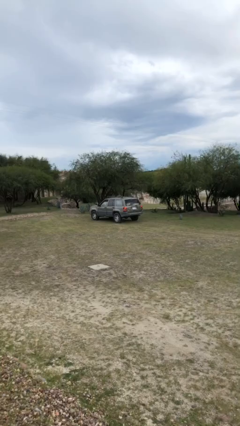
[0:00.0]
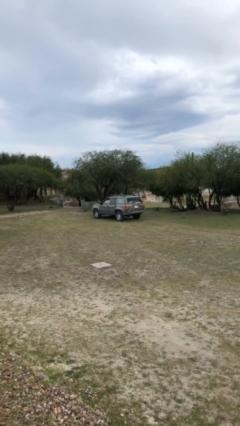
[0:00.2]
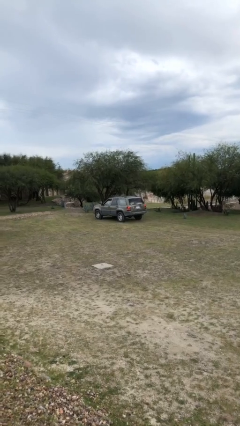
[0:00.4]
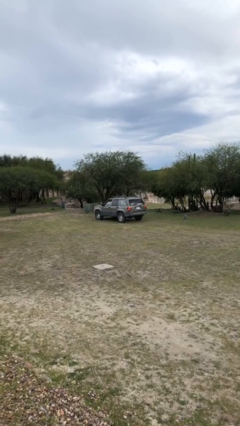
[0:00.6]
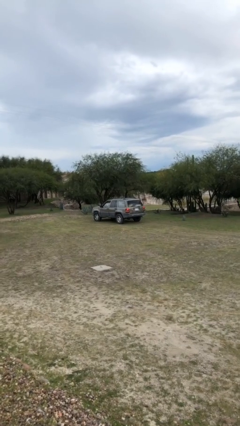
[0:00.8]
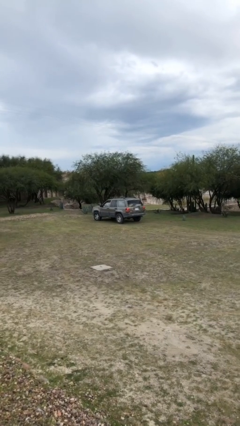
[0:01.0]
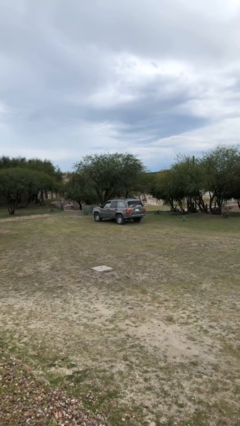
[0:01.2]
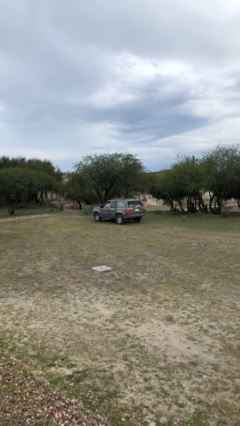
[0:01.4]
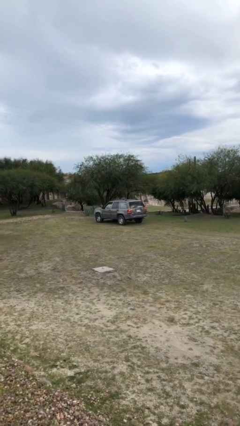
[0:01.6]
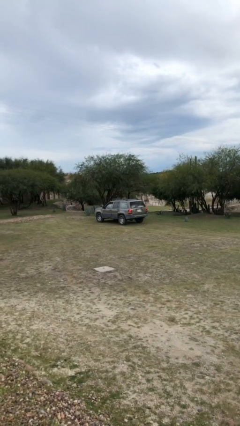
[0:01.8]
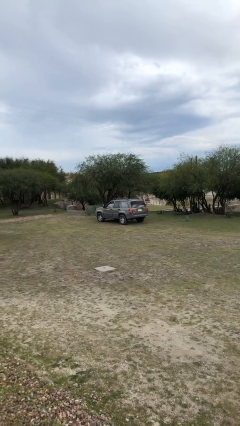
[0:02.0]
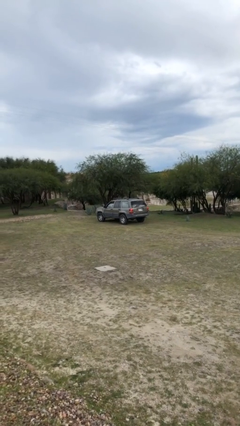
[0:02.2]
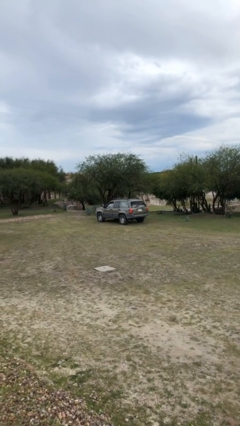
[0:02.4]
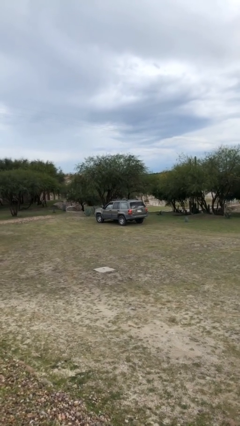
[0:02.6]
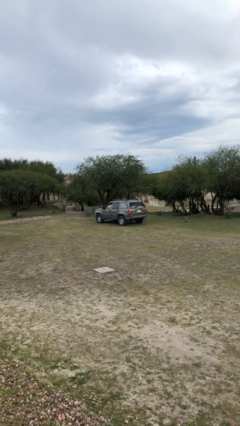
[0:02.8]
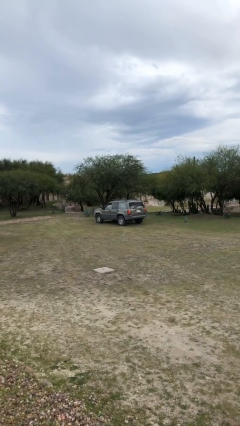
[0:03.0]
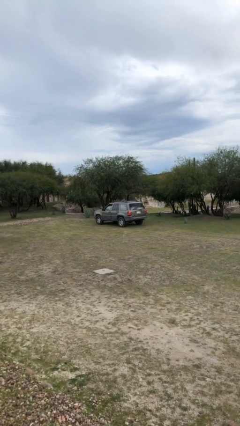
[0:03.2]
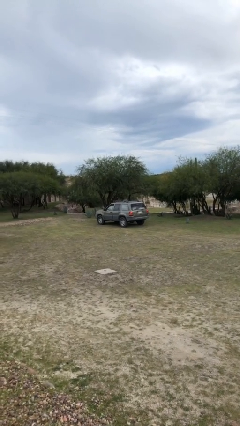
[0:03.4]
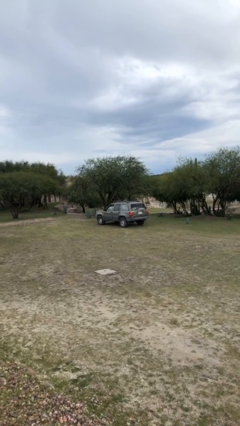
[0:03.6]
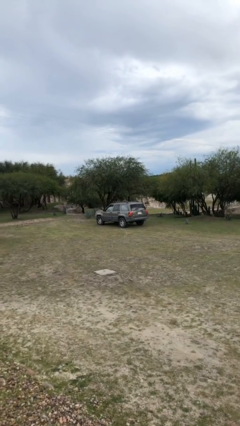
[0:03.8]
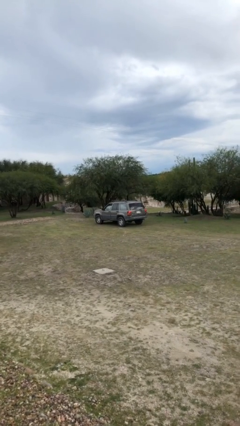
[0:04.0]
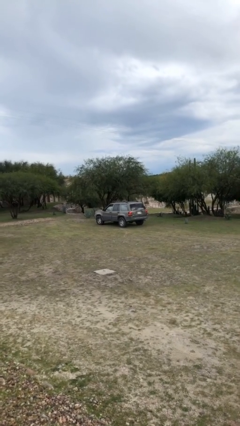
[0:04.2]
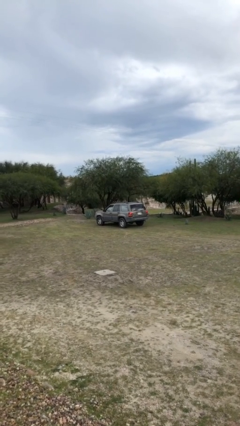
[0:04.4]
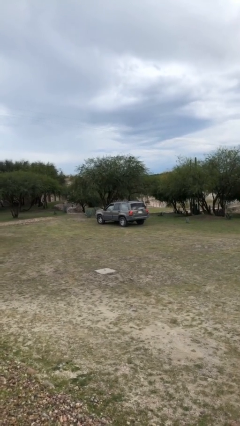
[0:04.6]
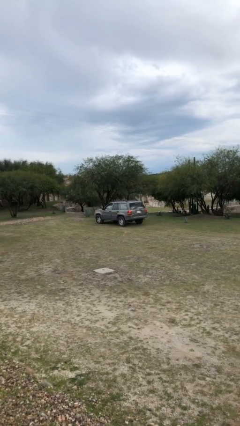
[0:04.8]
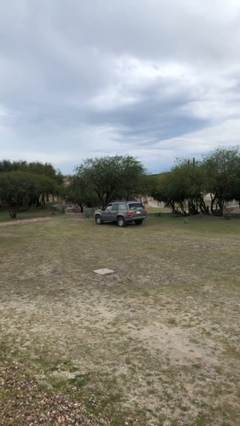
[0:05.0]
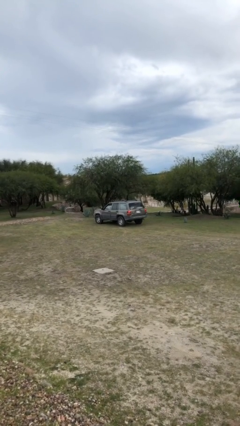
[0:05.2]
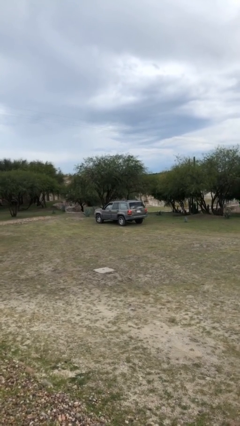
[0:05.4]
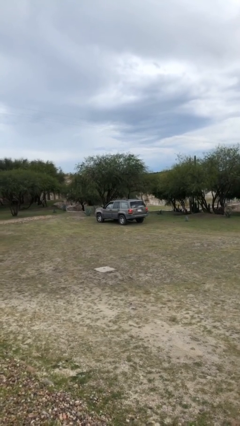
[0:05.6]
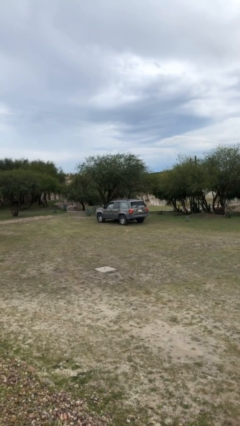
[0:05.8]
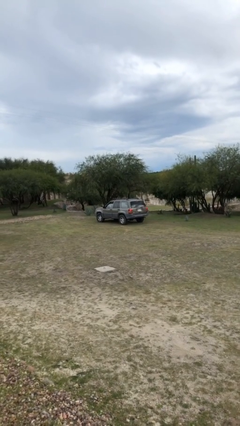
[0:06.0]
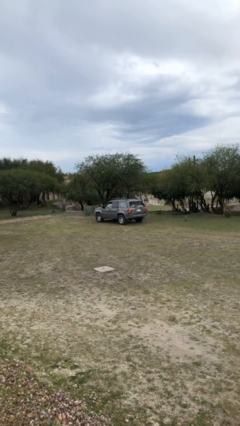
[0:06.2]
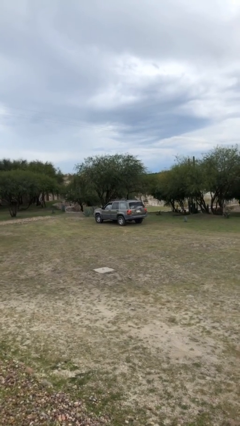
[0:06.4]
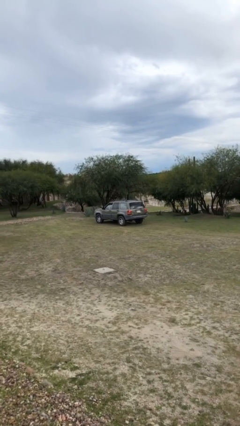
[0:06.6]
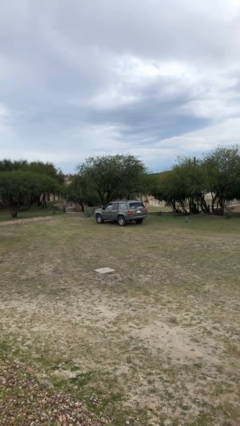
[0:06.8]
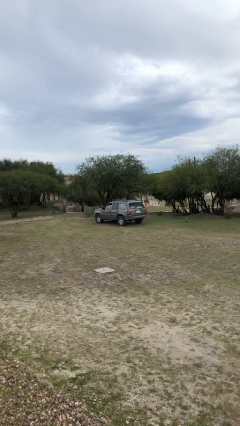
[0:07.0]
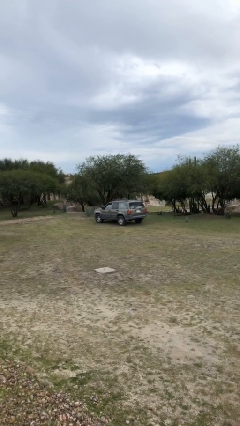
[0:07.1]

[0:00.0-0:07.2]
car picks up person

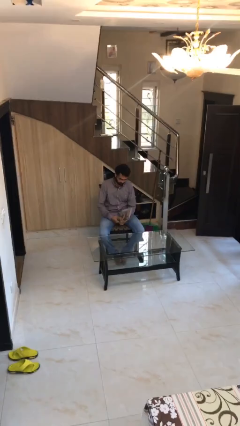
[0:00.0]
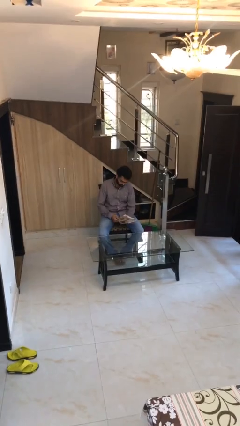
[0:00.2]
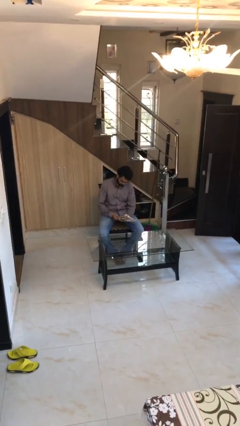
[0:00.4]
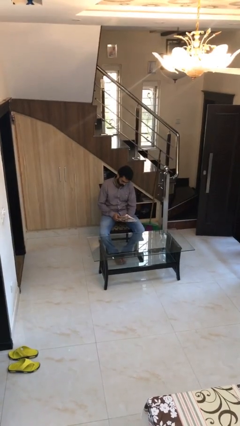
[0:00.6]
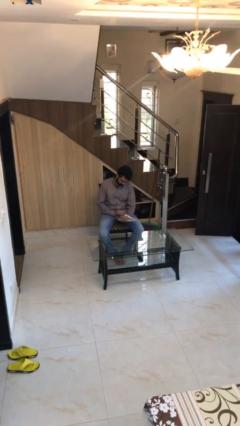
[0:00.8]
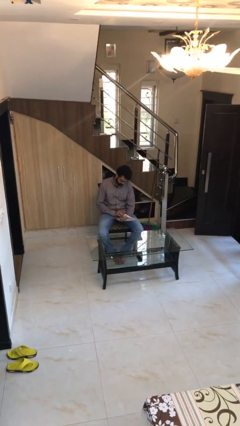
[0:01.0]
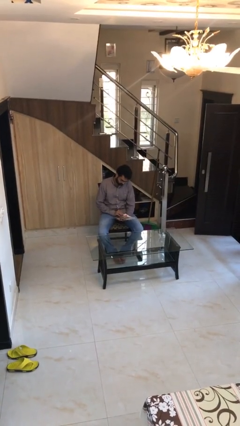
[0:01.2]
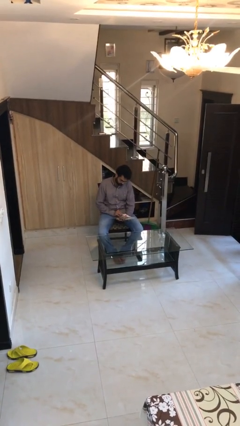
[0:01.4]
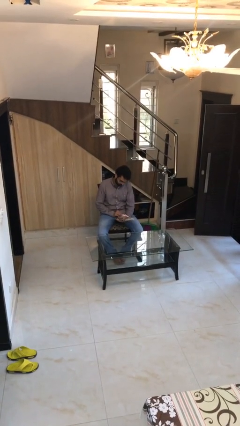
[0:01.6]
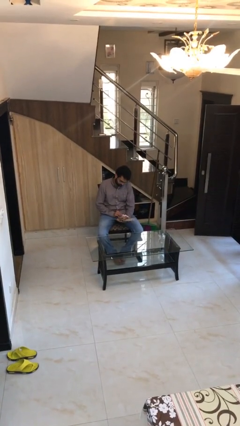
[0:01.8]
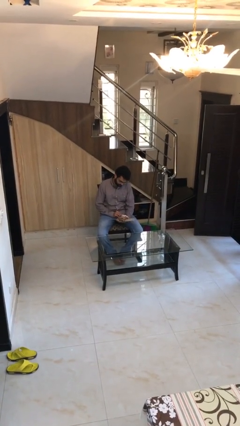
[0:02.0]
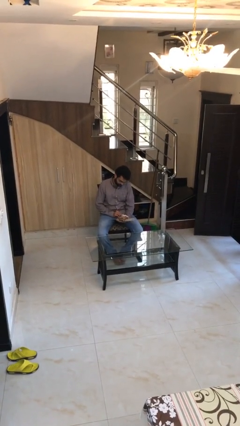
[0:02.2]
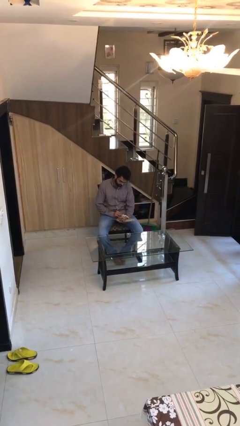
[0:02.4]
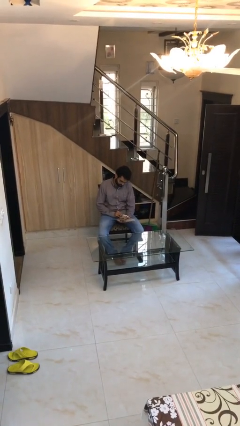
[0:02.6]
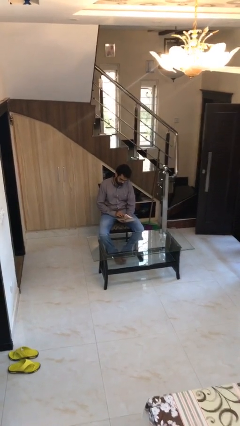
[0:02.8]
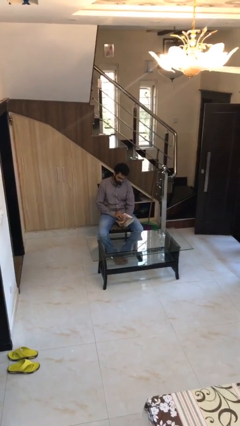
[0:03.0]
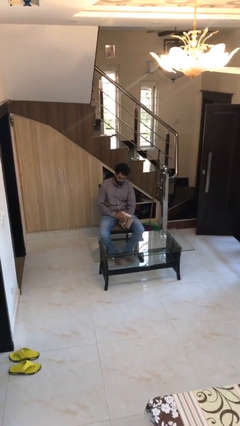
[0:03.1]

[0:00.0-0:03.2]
person reads document

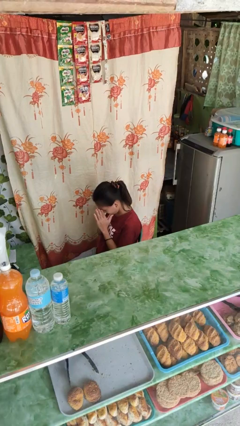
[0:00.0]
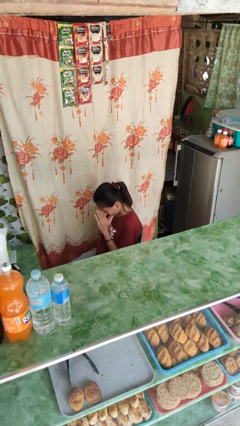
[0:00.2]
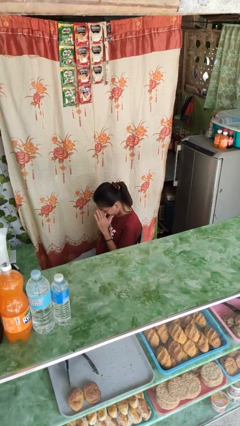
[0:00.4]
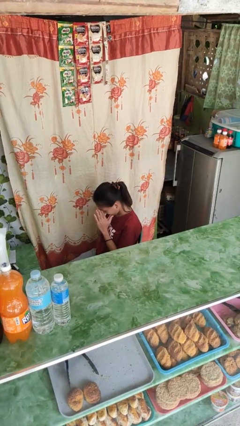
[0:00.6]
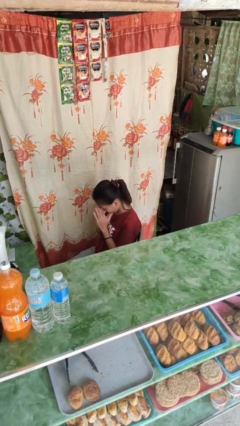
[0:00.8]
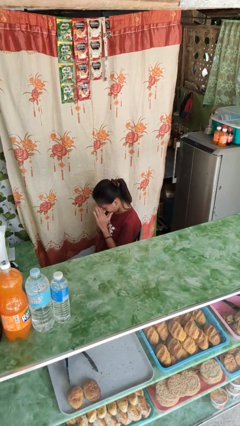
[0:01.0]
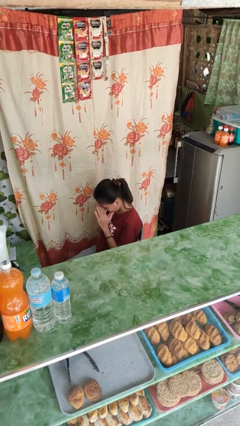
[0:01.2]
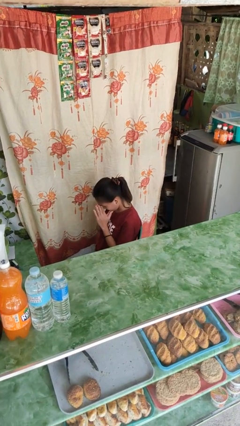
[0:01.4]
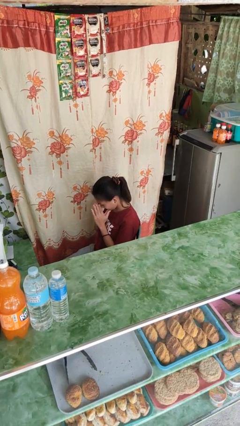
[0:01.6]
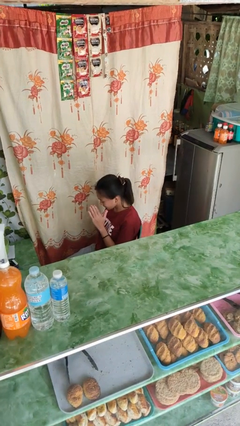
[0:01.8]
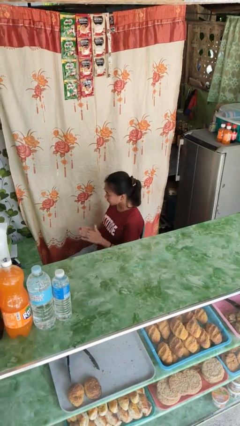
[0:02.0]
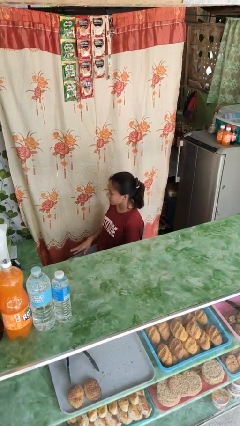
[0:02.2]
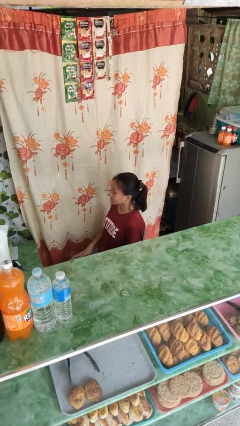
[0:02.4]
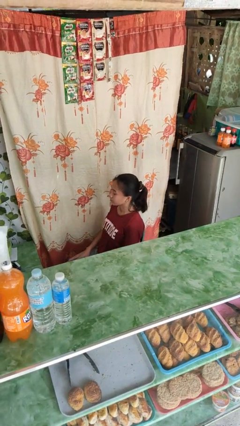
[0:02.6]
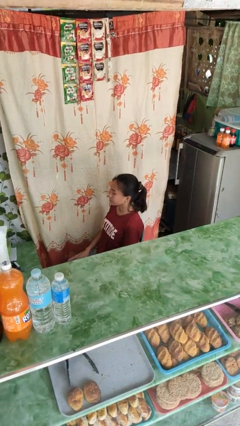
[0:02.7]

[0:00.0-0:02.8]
person rubs eyes

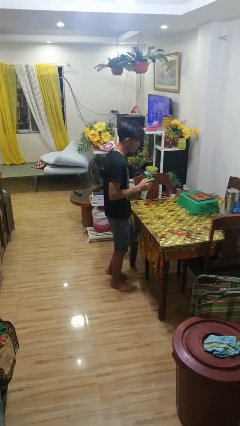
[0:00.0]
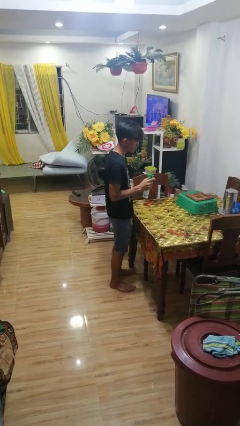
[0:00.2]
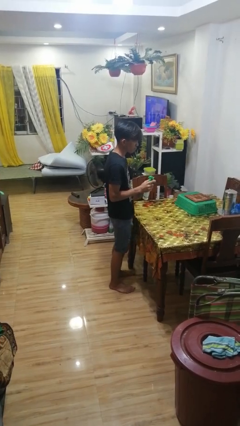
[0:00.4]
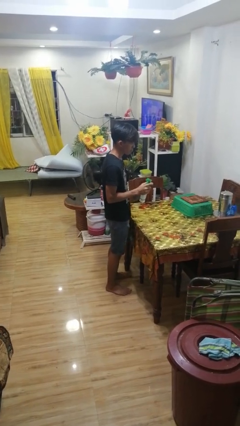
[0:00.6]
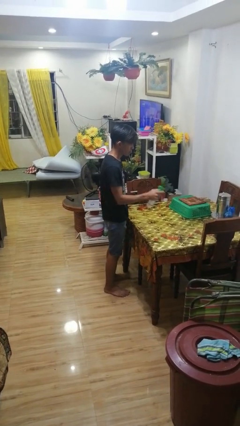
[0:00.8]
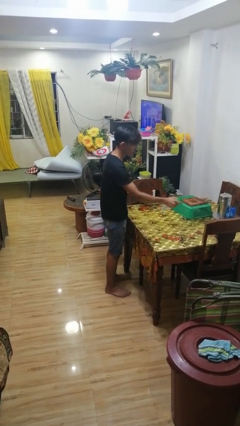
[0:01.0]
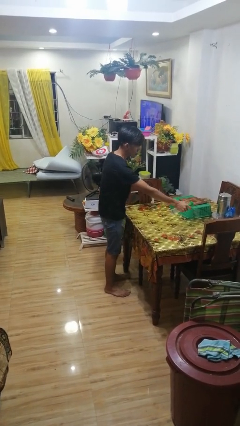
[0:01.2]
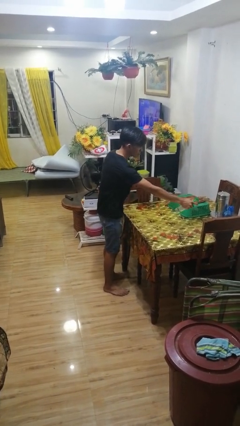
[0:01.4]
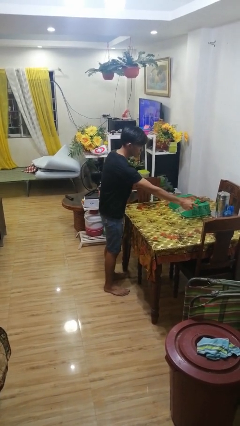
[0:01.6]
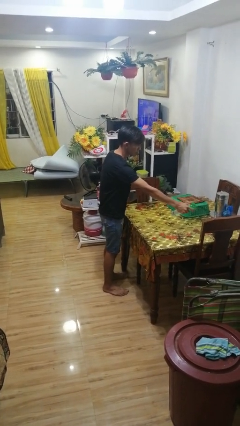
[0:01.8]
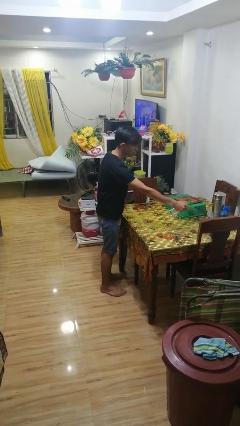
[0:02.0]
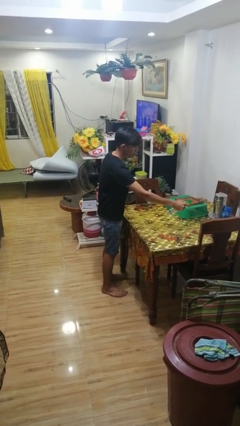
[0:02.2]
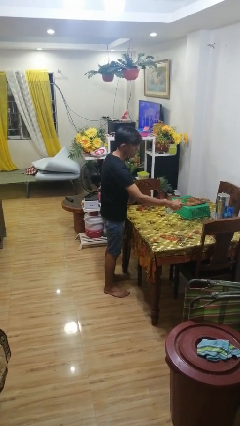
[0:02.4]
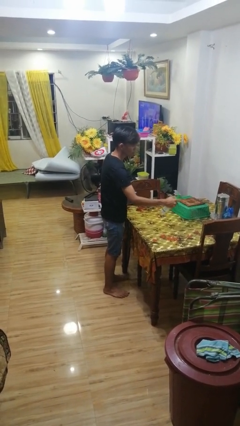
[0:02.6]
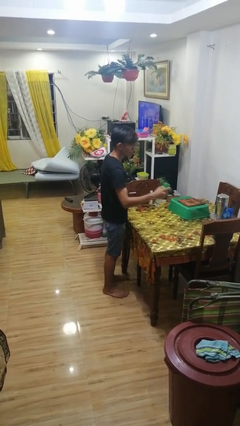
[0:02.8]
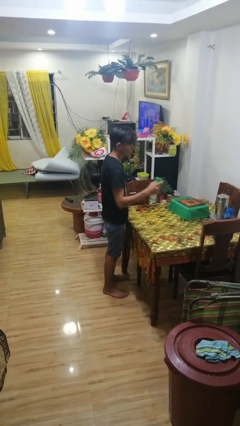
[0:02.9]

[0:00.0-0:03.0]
person sprays from bottle

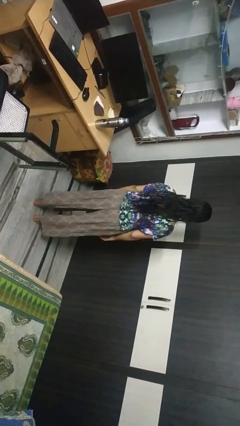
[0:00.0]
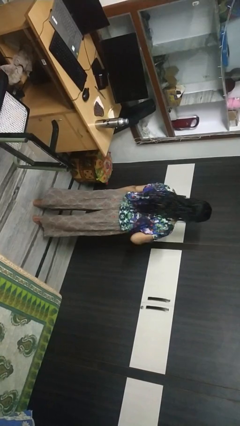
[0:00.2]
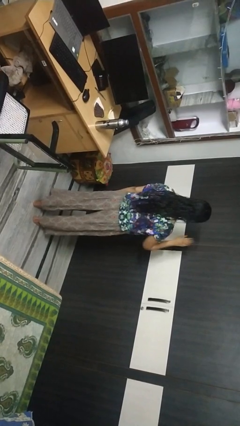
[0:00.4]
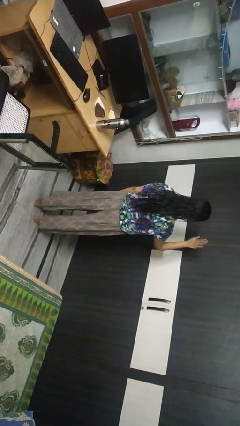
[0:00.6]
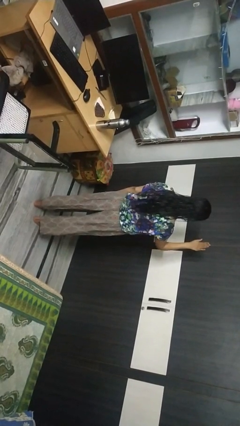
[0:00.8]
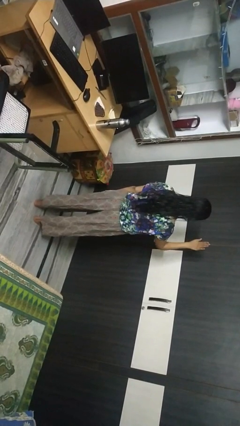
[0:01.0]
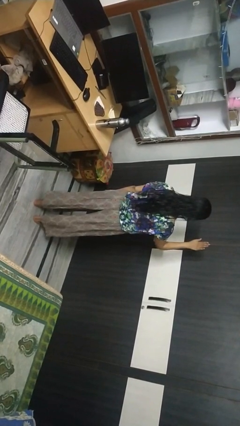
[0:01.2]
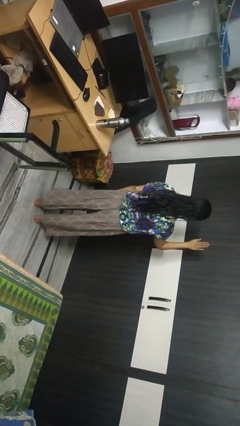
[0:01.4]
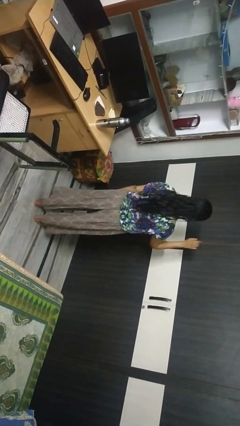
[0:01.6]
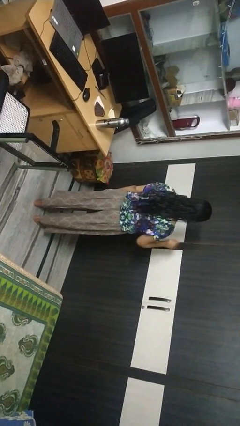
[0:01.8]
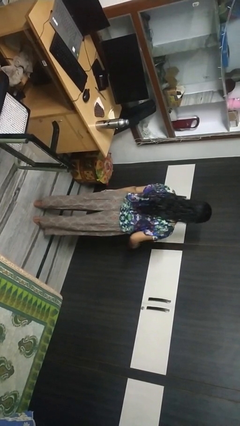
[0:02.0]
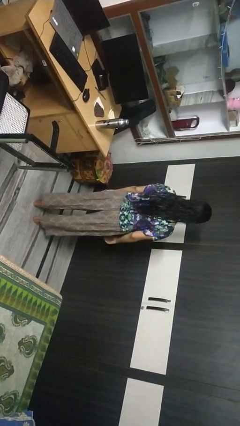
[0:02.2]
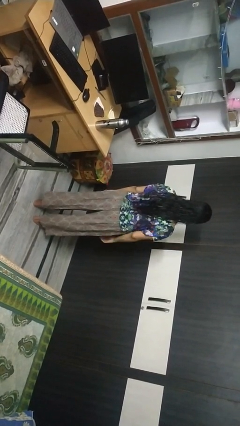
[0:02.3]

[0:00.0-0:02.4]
person gestures stop
